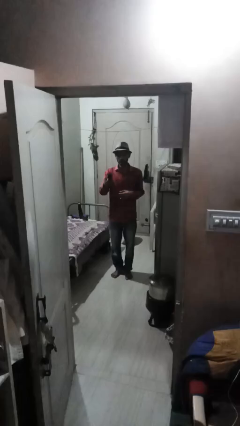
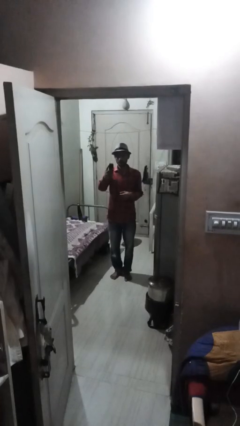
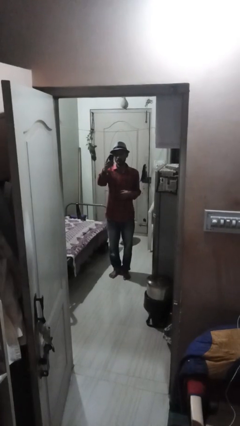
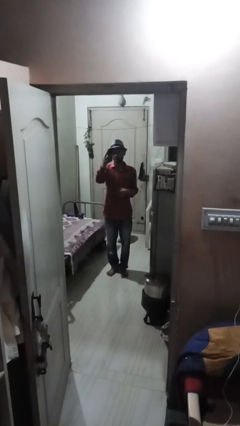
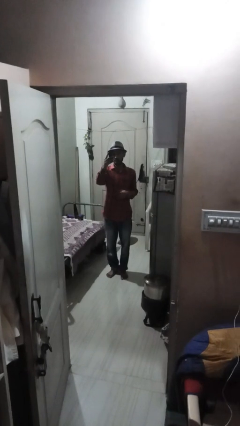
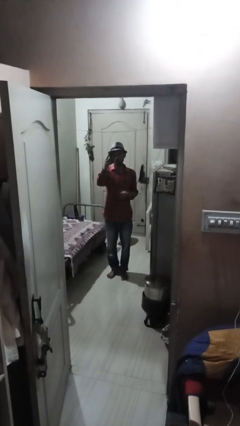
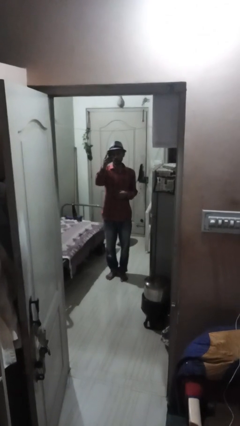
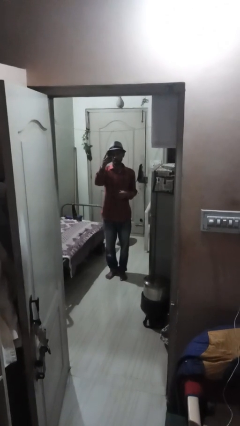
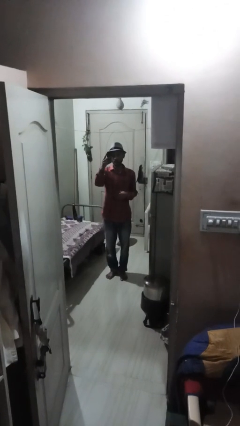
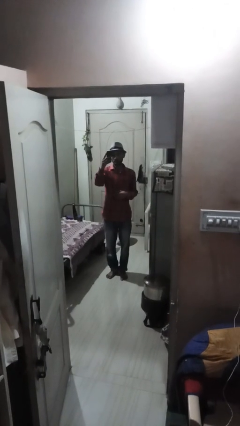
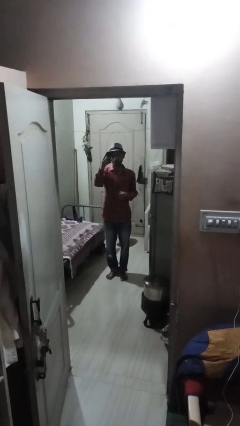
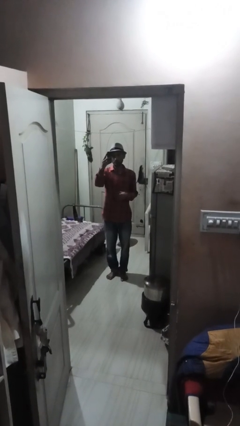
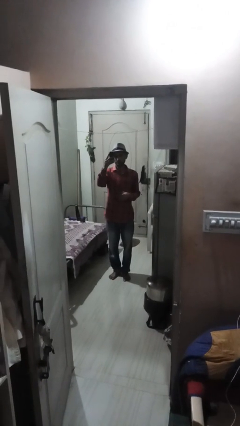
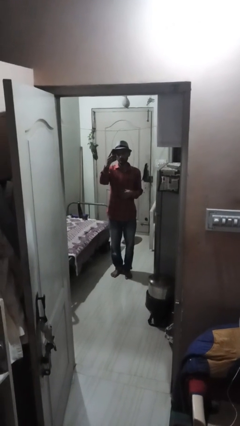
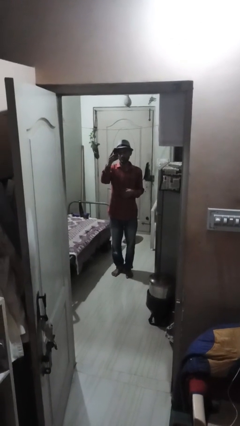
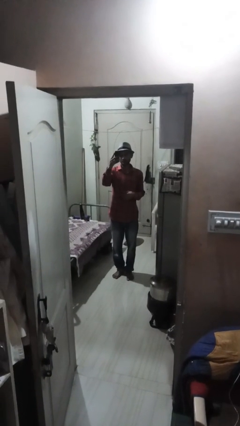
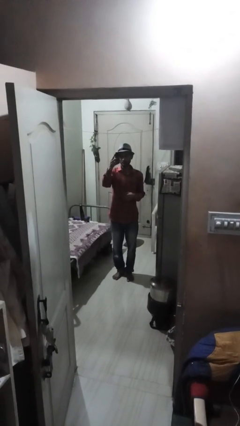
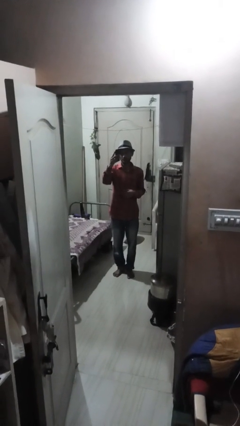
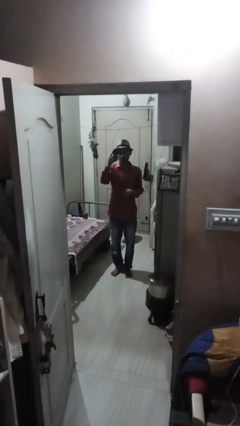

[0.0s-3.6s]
person takes selfie

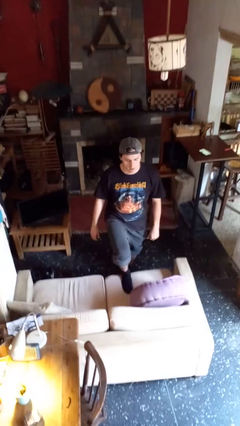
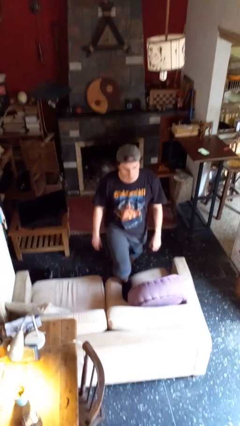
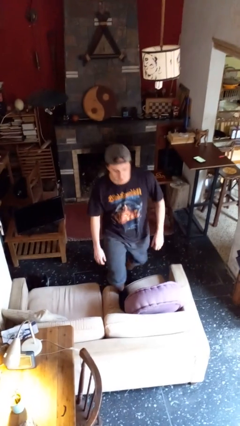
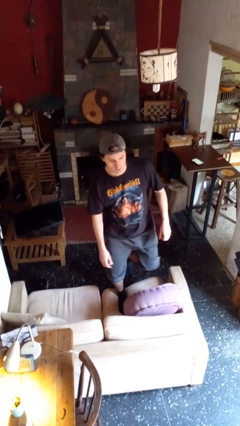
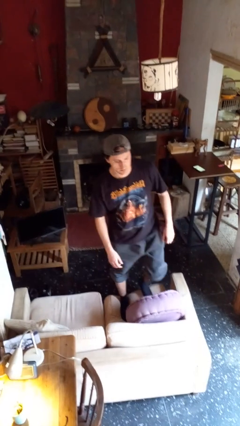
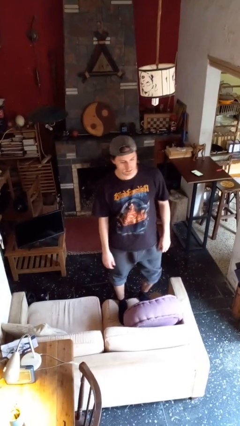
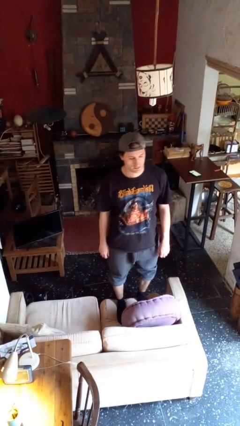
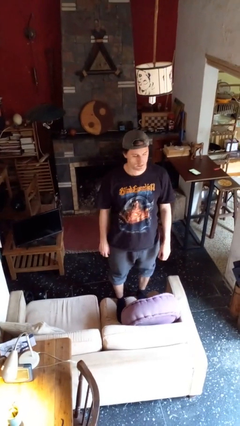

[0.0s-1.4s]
person climbs on couch

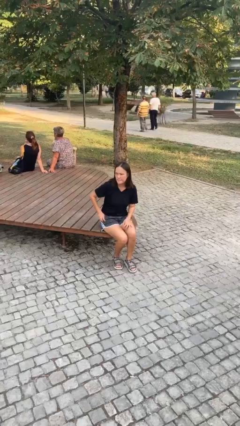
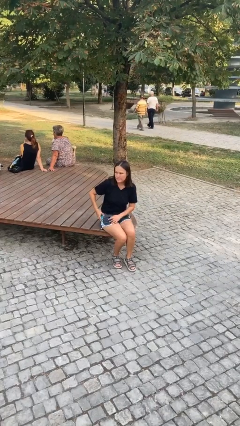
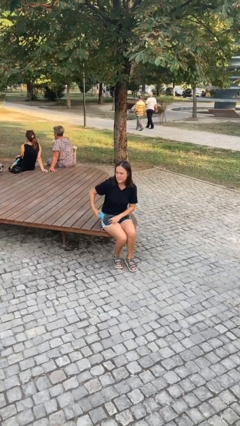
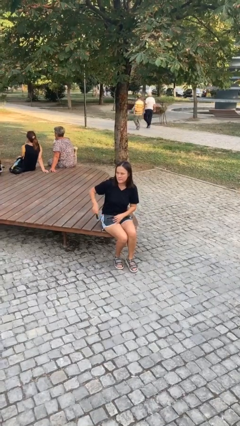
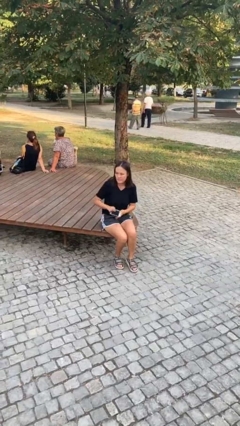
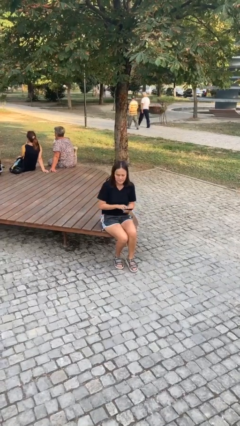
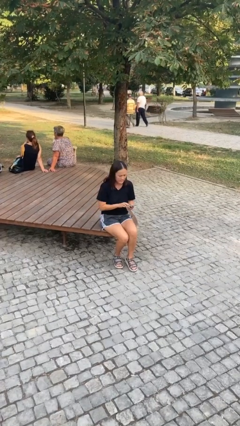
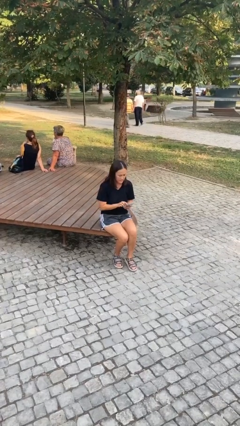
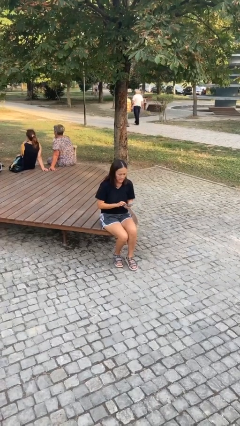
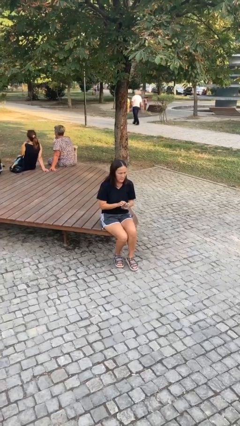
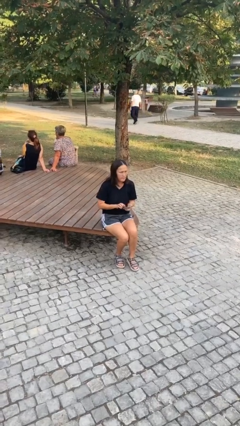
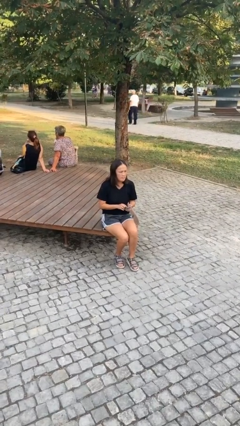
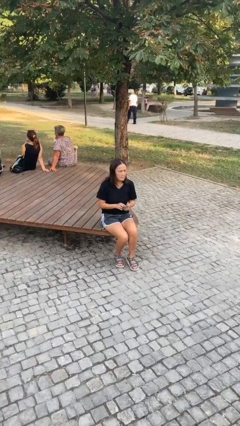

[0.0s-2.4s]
person takes phone from pocket

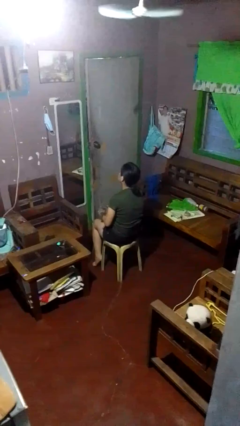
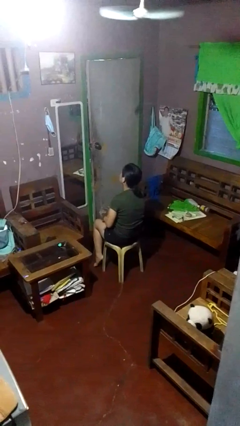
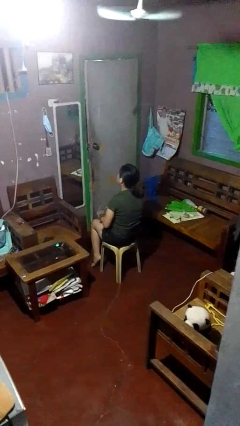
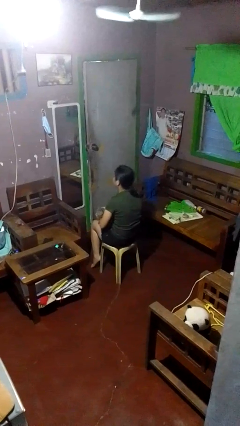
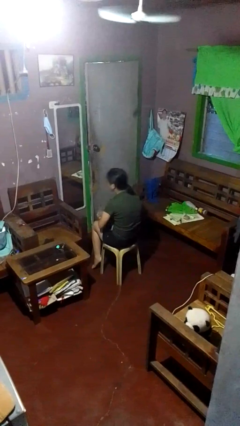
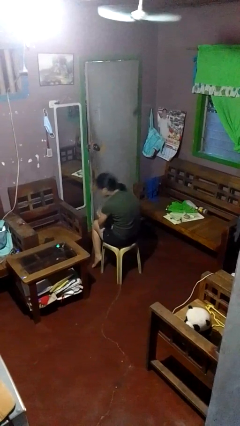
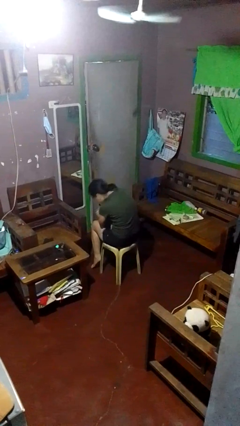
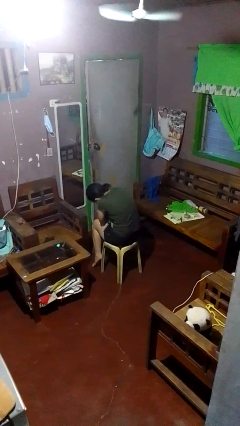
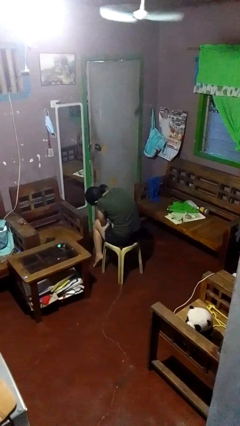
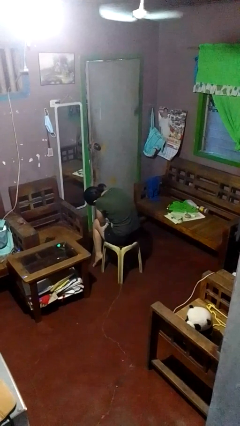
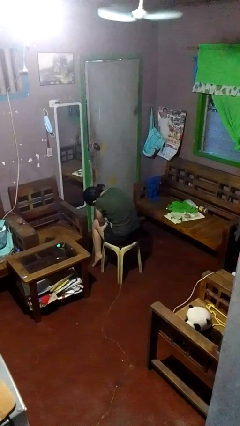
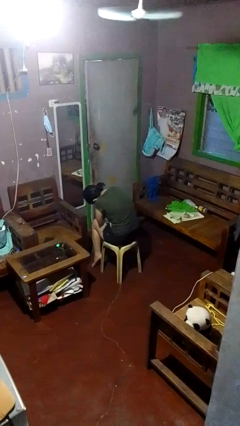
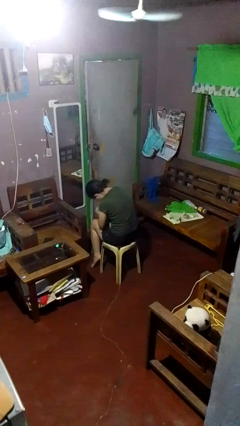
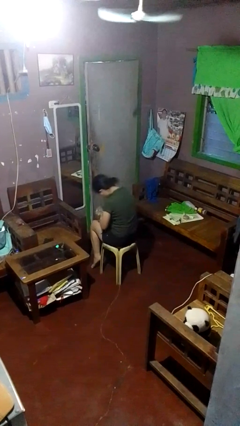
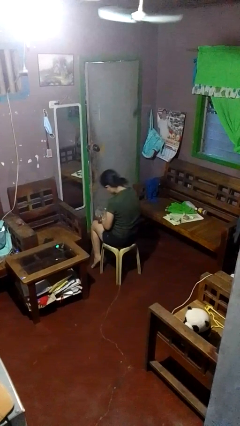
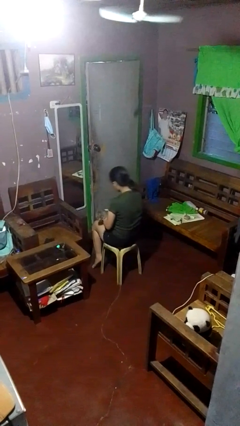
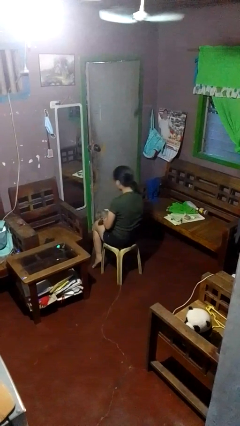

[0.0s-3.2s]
person hugs cat

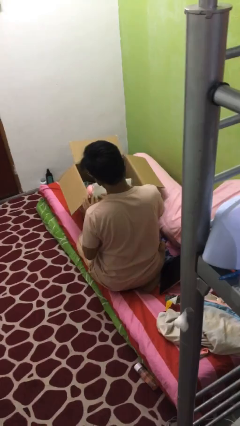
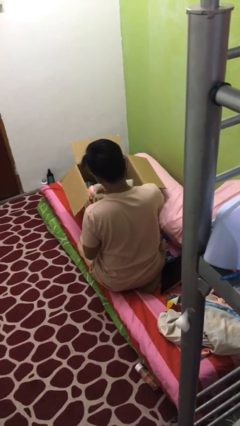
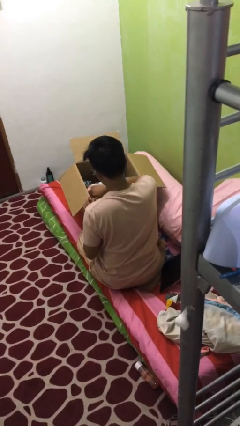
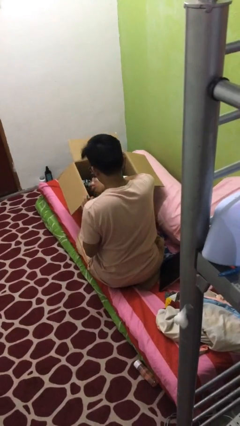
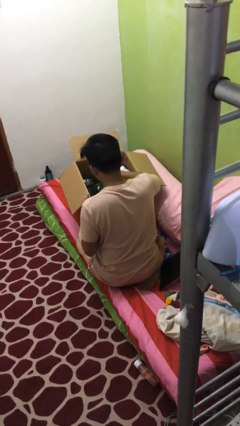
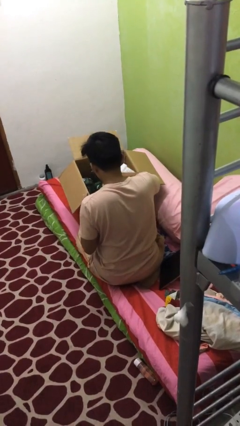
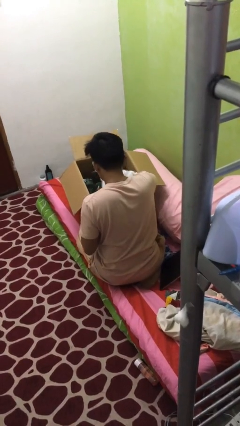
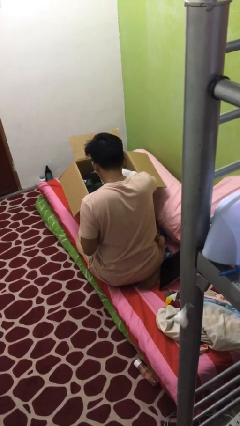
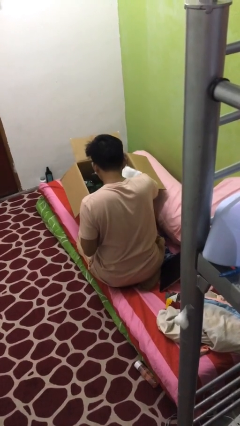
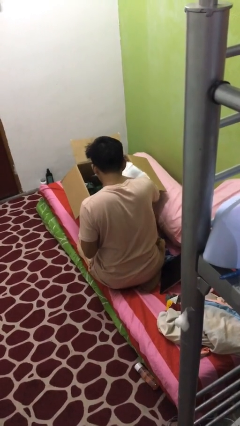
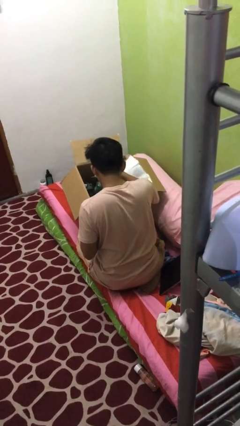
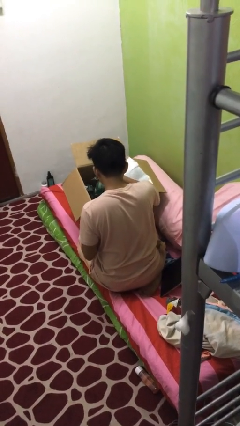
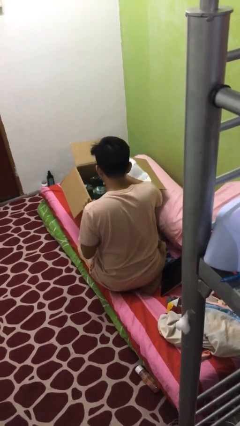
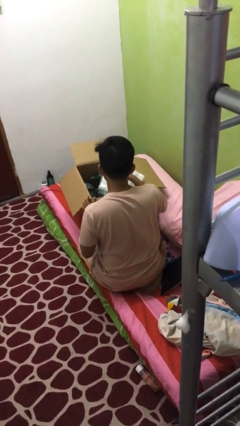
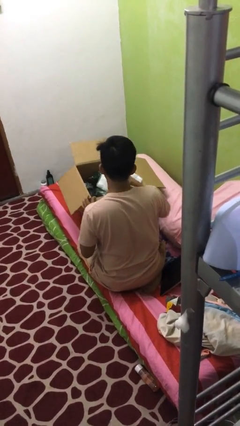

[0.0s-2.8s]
person searches in box

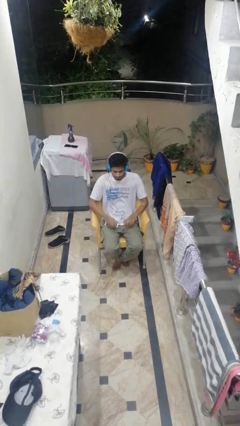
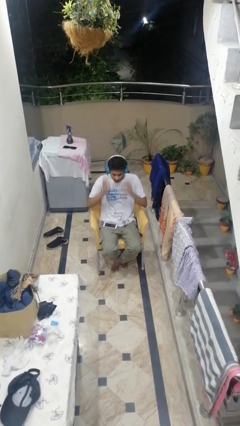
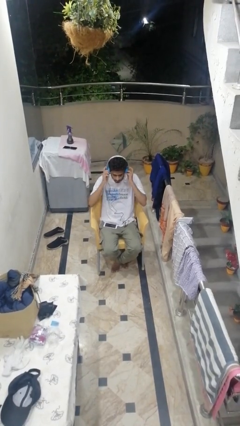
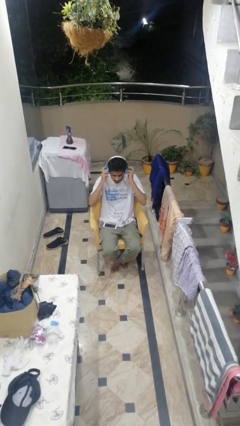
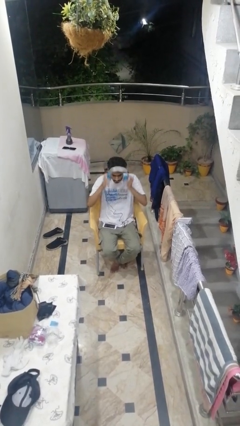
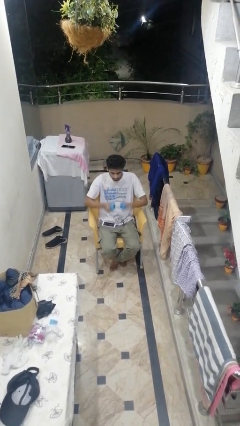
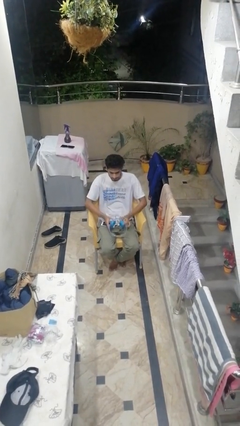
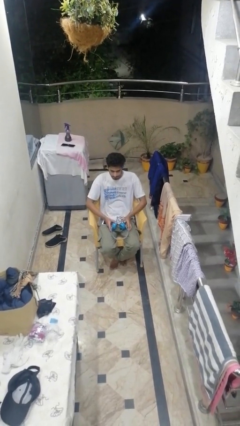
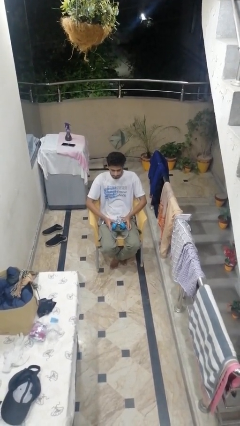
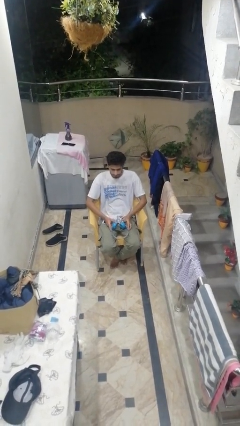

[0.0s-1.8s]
person takes off headphones

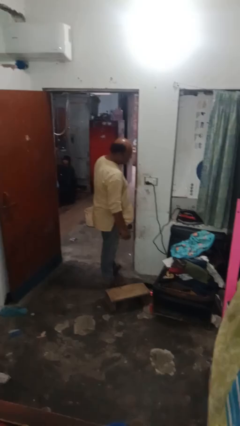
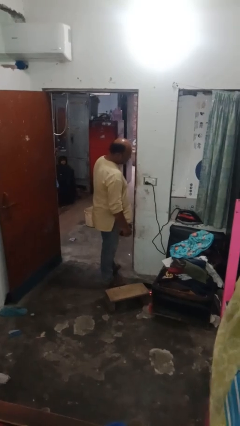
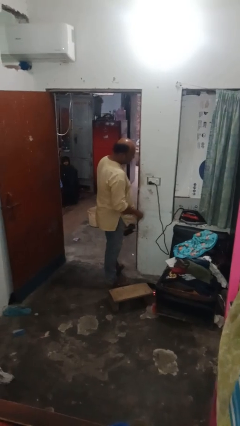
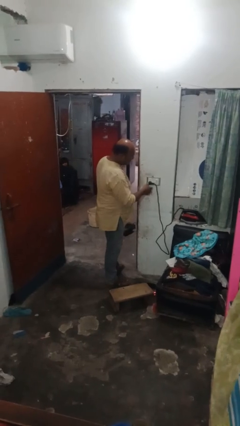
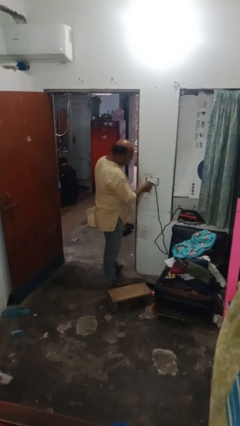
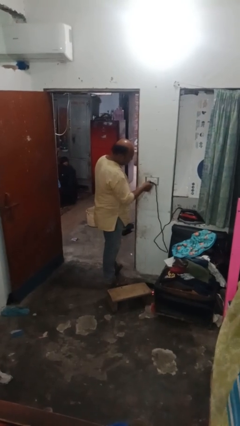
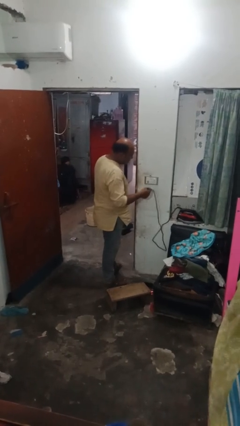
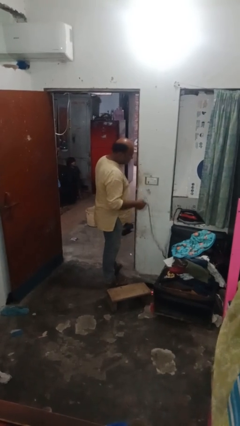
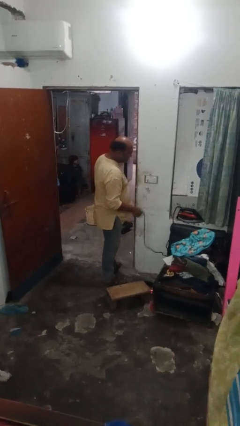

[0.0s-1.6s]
person unplugs from electrical socket

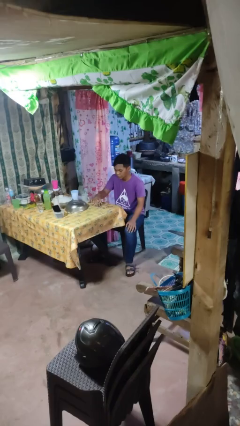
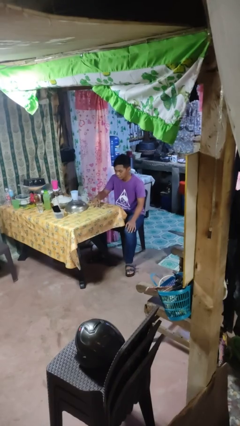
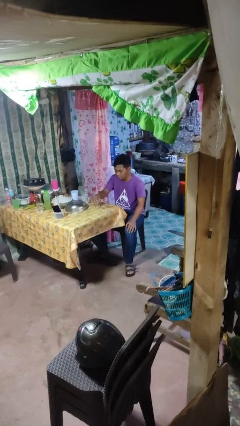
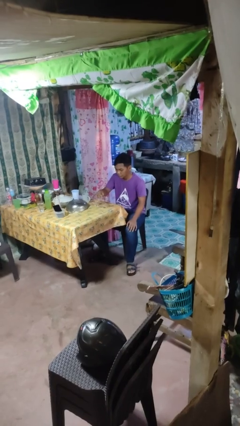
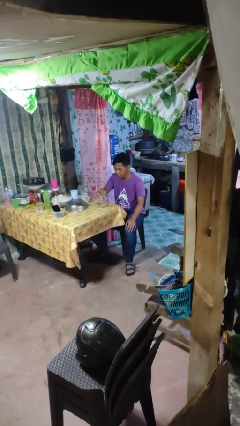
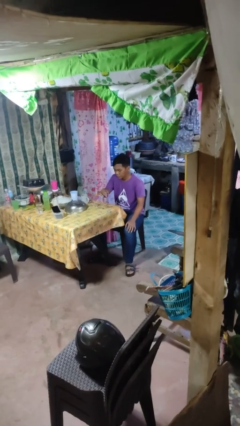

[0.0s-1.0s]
person picks up object from table
